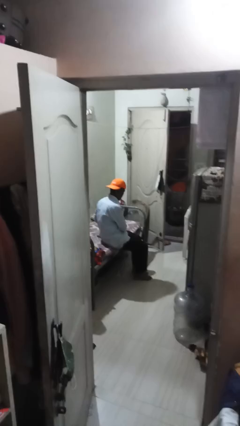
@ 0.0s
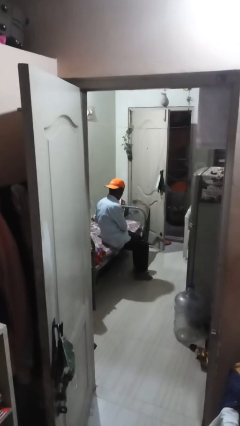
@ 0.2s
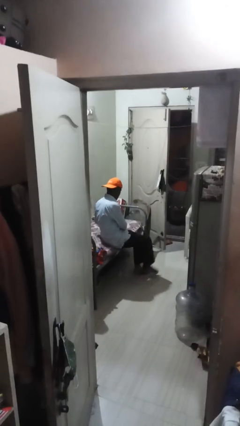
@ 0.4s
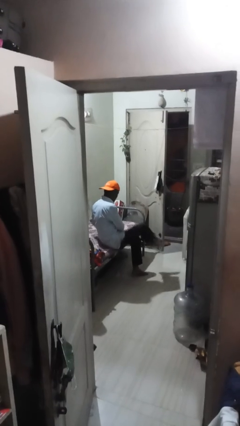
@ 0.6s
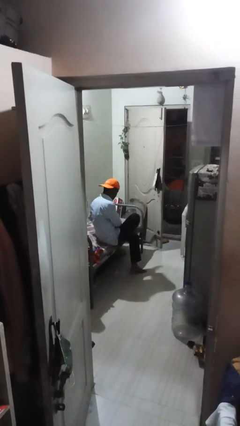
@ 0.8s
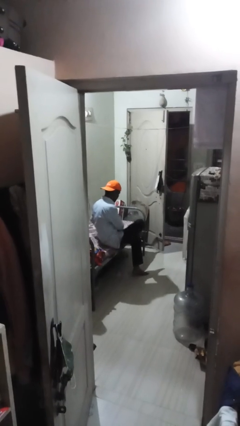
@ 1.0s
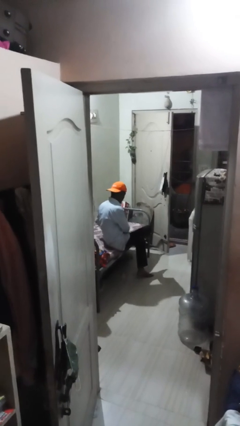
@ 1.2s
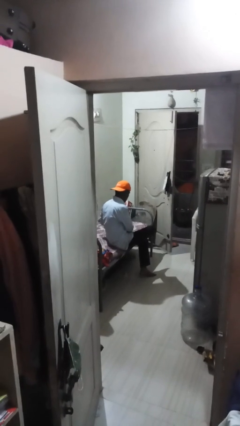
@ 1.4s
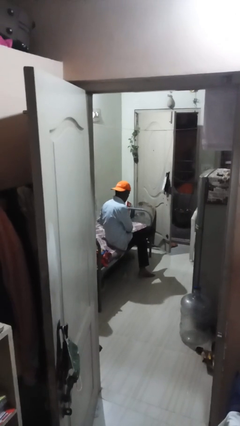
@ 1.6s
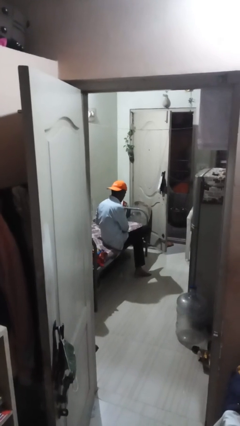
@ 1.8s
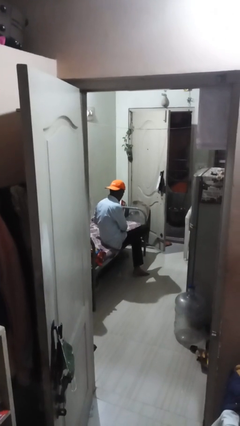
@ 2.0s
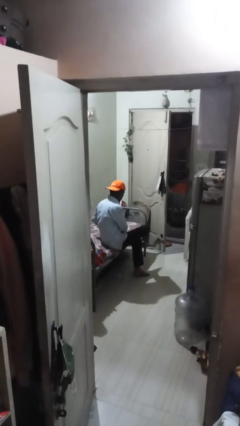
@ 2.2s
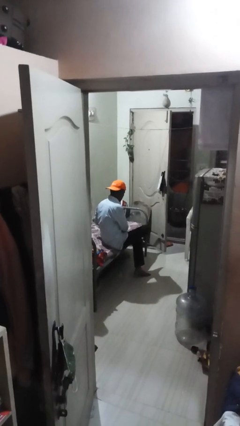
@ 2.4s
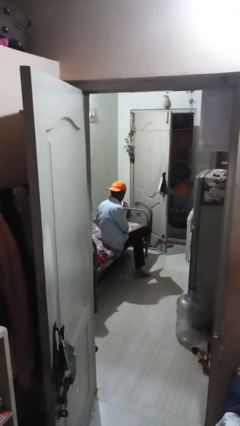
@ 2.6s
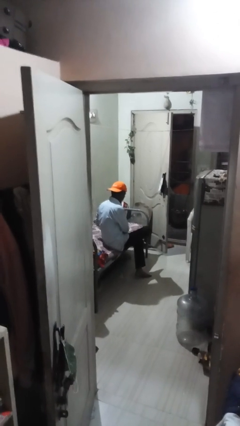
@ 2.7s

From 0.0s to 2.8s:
person crosses legs

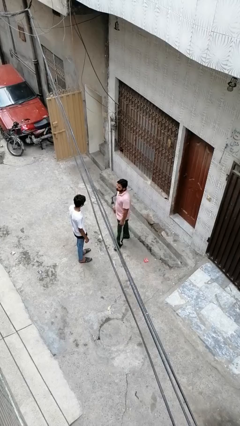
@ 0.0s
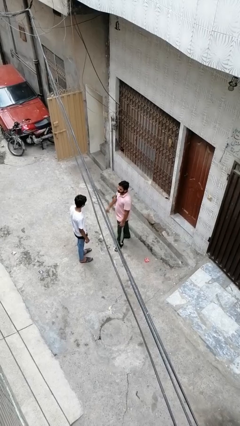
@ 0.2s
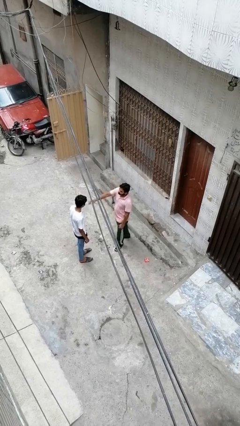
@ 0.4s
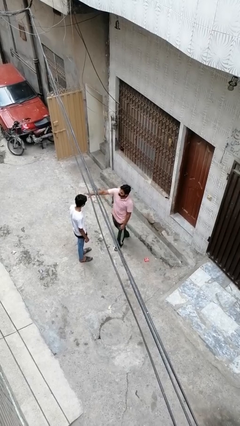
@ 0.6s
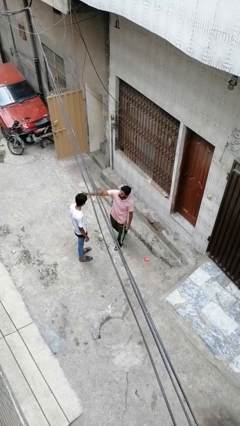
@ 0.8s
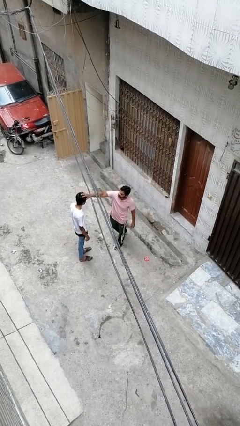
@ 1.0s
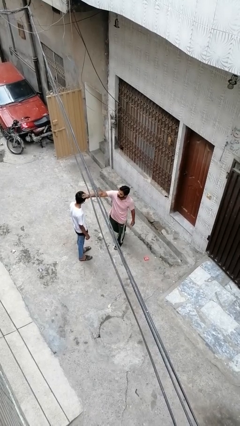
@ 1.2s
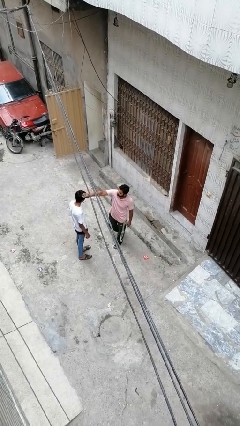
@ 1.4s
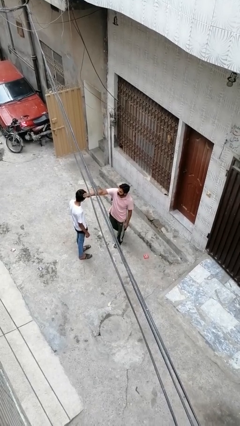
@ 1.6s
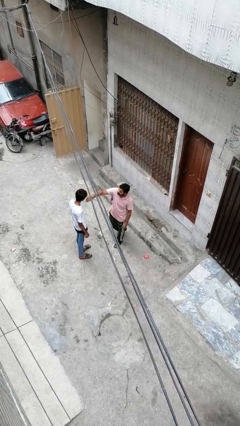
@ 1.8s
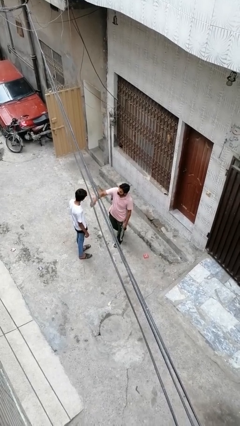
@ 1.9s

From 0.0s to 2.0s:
person grabs person by hair

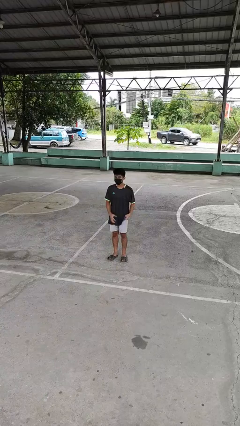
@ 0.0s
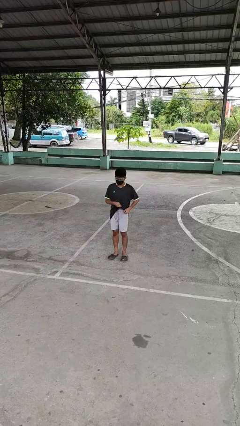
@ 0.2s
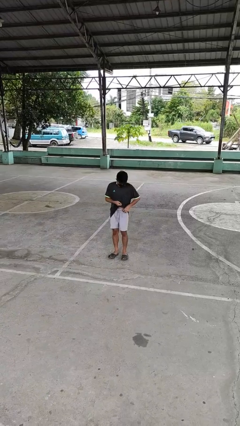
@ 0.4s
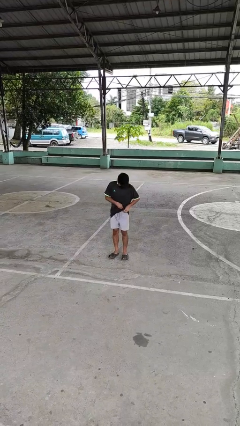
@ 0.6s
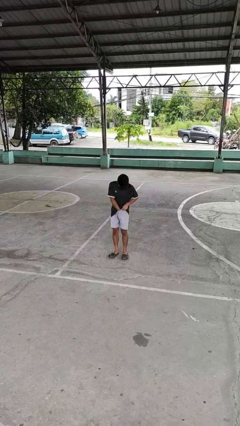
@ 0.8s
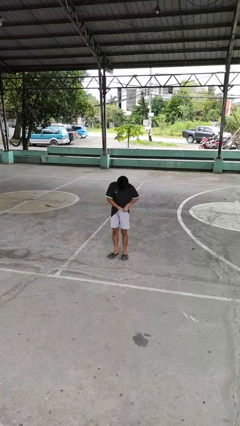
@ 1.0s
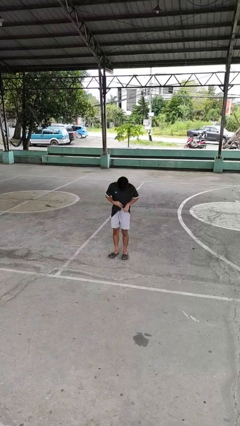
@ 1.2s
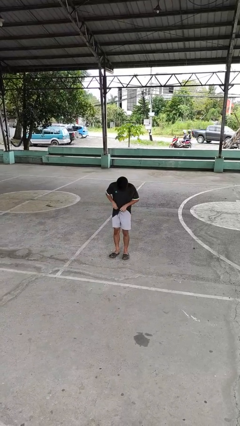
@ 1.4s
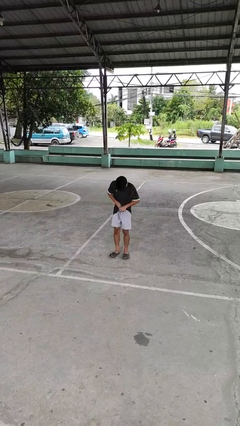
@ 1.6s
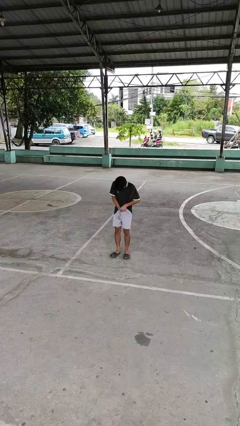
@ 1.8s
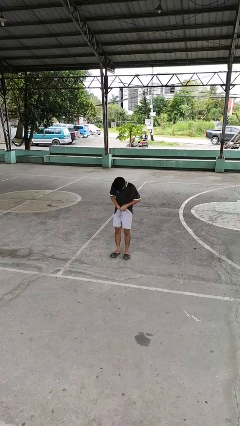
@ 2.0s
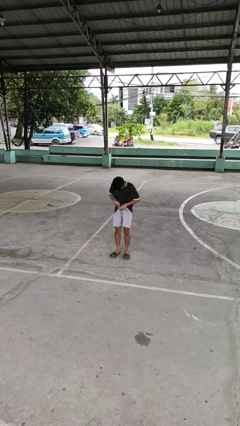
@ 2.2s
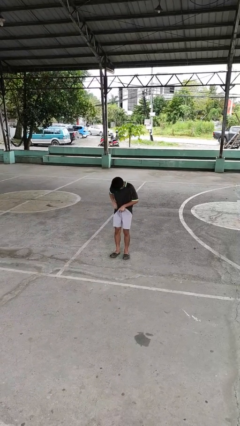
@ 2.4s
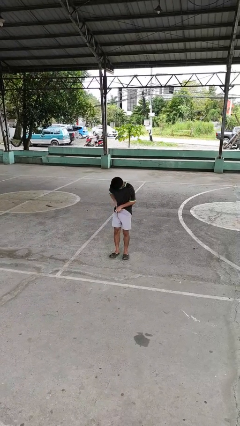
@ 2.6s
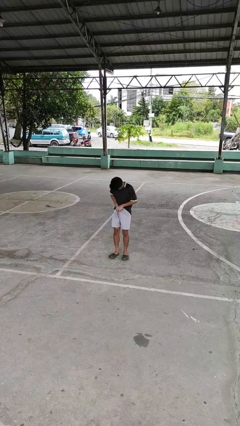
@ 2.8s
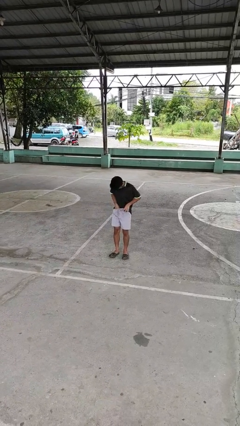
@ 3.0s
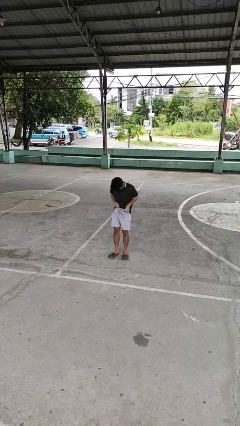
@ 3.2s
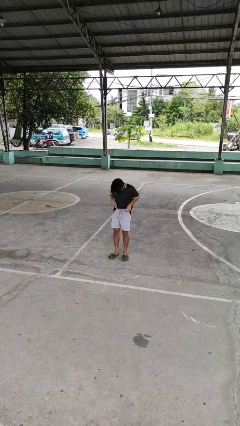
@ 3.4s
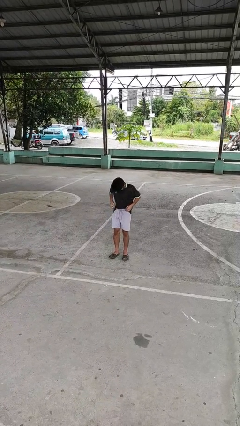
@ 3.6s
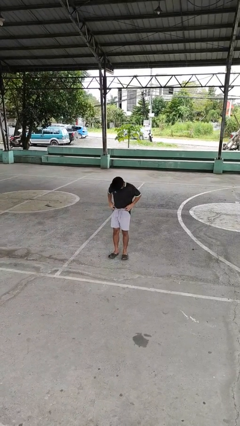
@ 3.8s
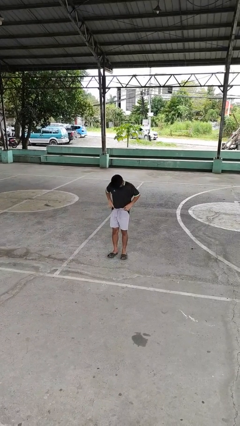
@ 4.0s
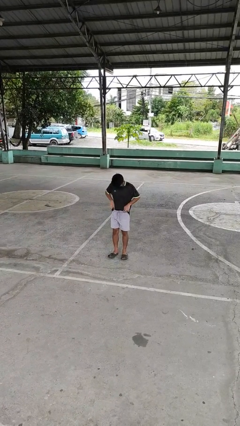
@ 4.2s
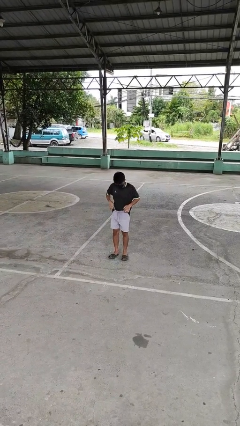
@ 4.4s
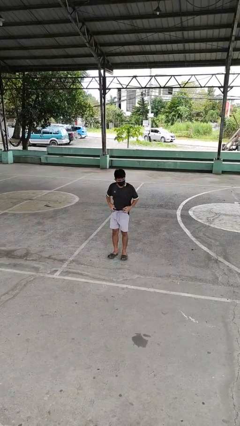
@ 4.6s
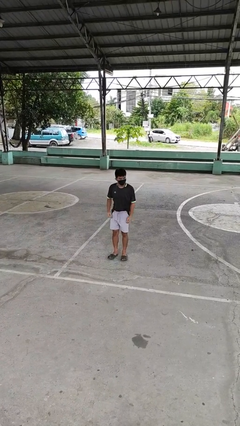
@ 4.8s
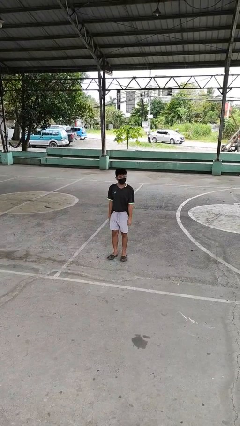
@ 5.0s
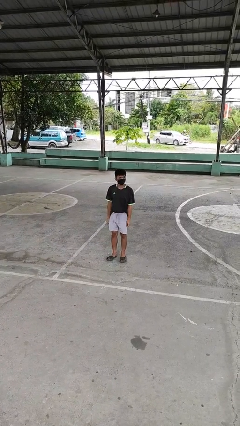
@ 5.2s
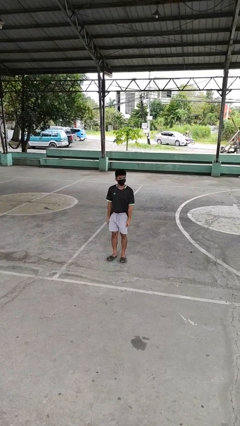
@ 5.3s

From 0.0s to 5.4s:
person tucks in shirt

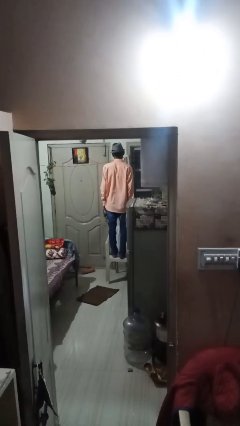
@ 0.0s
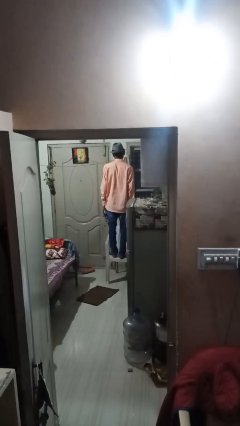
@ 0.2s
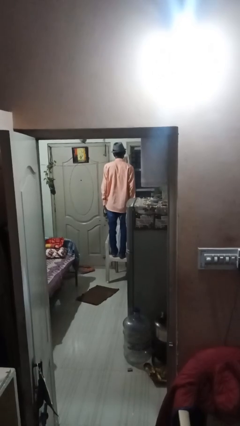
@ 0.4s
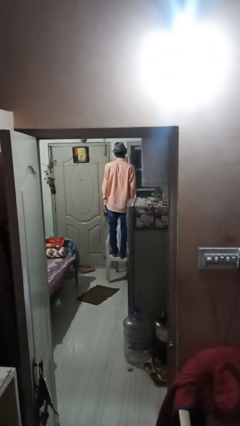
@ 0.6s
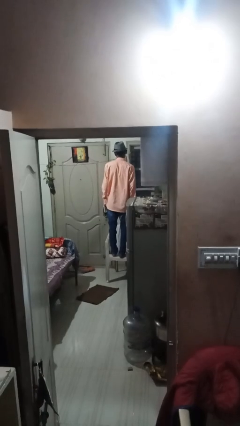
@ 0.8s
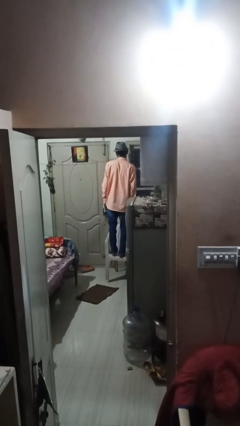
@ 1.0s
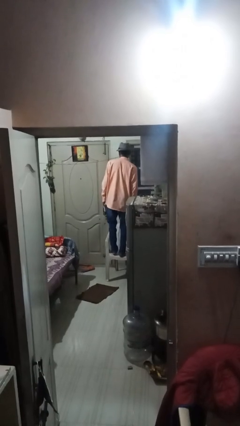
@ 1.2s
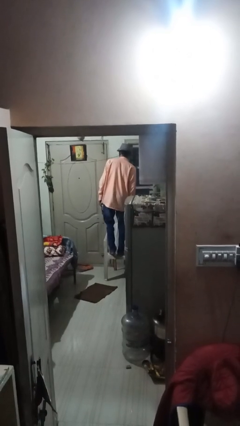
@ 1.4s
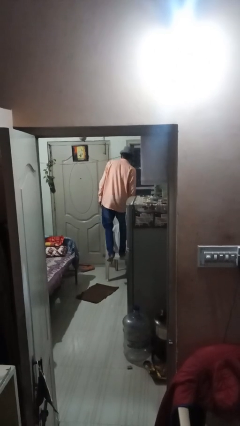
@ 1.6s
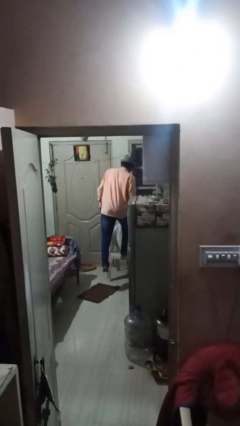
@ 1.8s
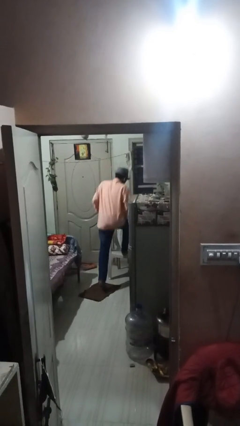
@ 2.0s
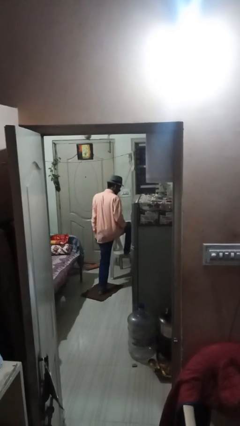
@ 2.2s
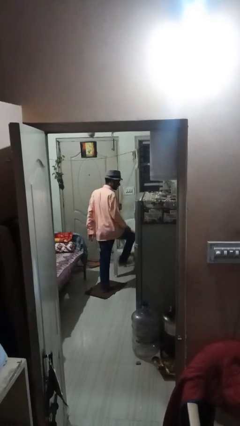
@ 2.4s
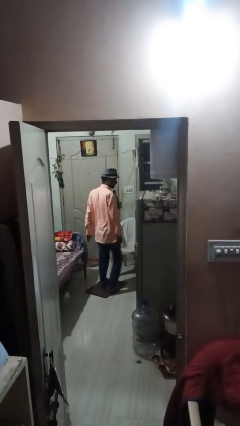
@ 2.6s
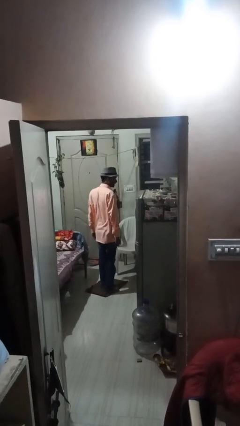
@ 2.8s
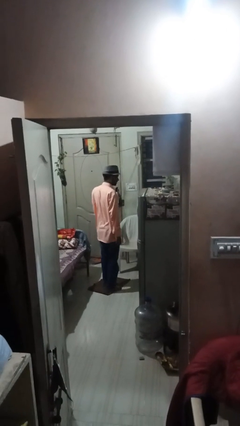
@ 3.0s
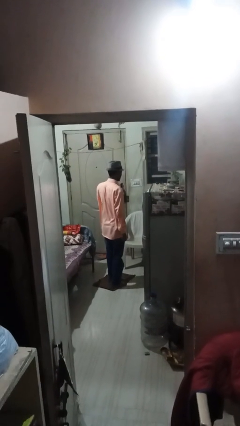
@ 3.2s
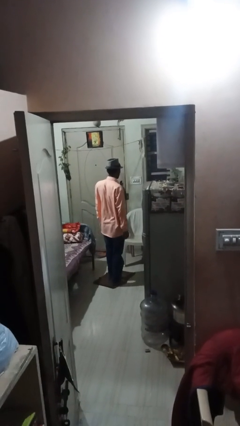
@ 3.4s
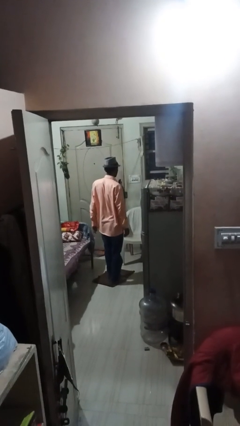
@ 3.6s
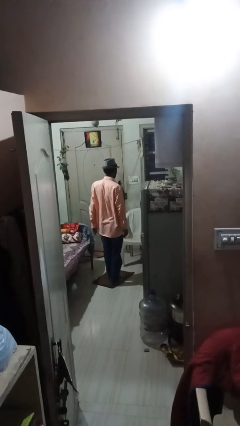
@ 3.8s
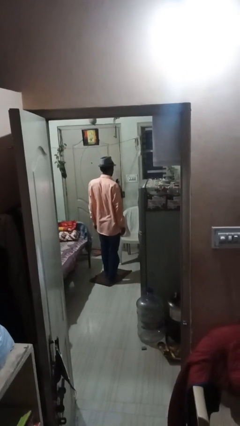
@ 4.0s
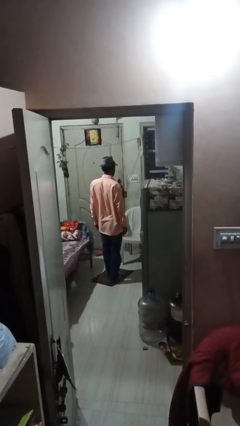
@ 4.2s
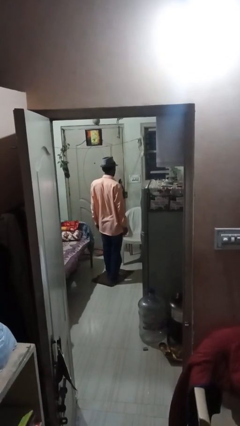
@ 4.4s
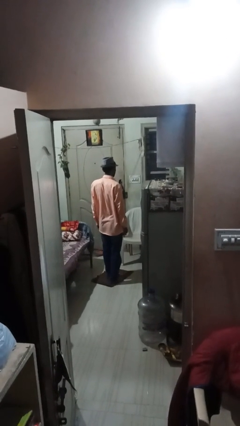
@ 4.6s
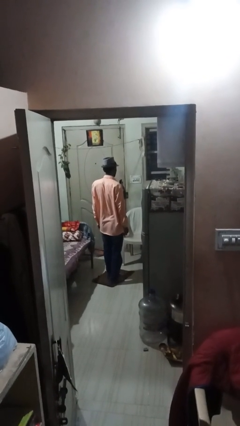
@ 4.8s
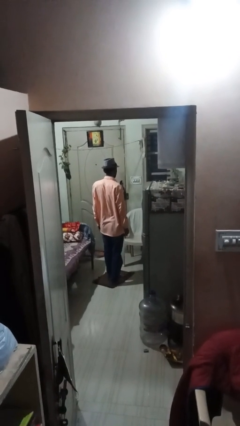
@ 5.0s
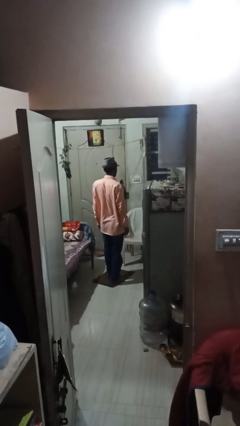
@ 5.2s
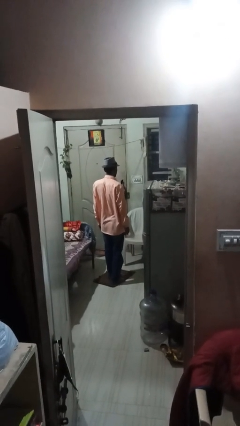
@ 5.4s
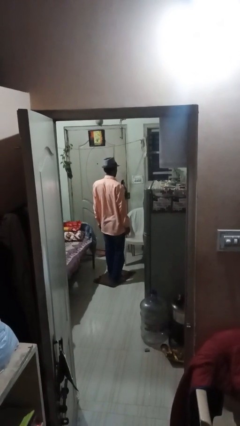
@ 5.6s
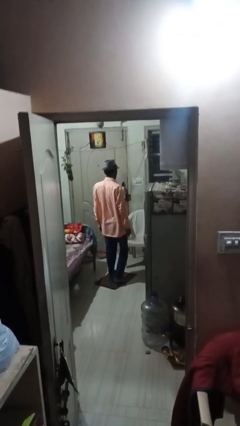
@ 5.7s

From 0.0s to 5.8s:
person climbs off chair

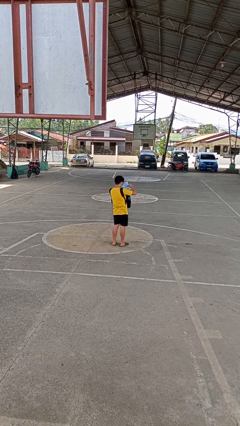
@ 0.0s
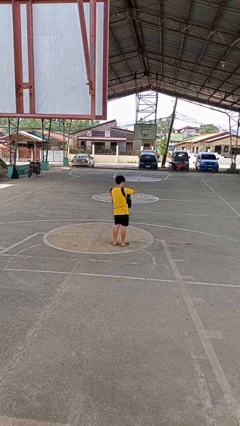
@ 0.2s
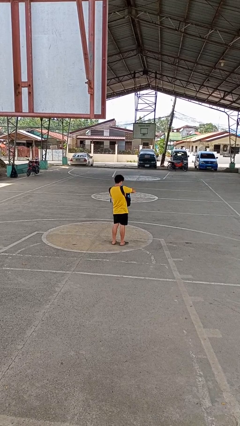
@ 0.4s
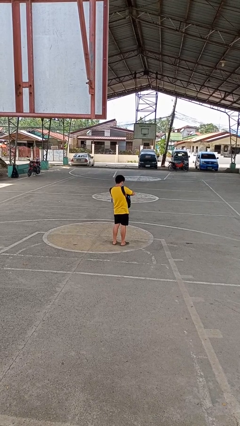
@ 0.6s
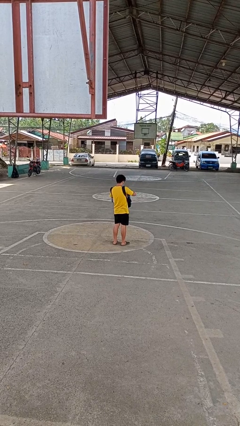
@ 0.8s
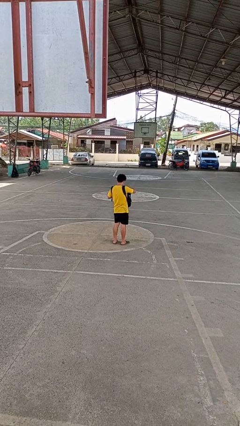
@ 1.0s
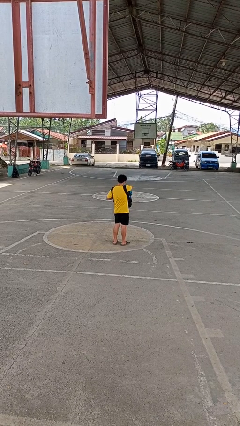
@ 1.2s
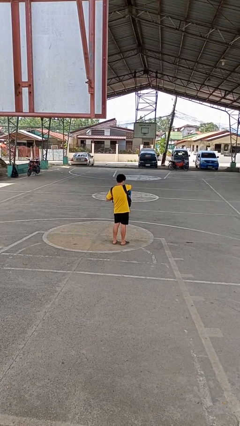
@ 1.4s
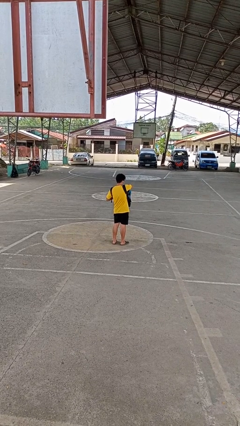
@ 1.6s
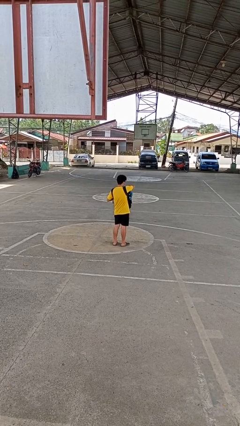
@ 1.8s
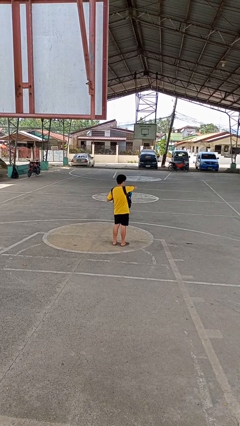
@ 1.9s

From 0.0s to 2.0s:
person puts object into backpack
